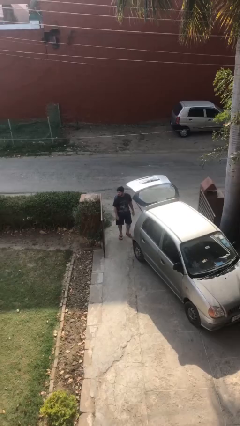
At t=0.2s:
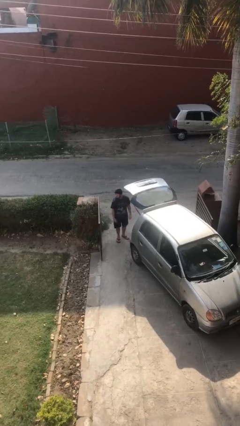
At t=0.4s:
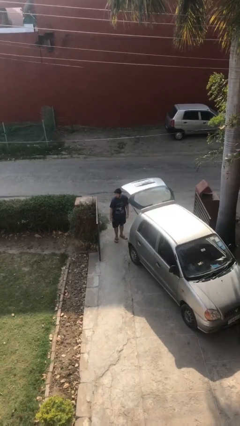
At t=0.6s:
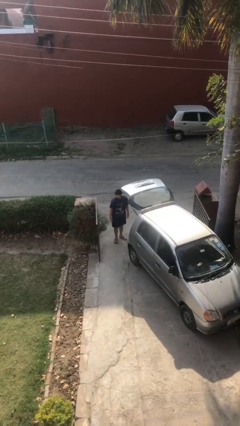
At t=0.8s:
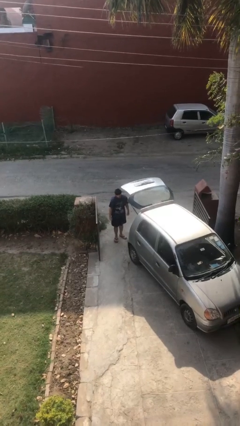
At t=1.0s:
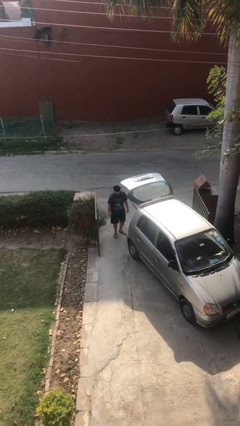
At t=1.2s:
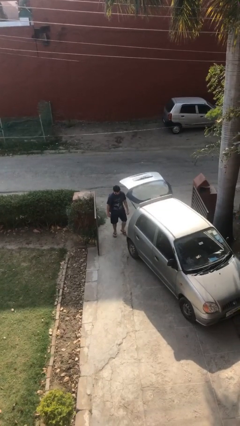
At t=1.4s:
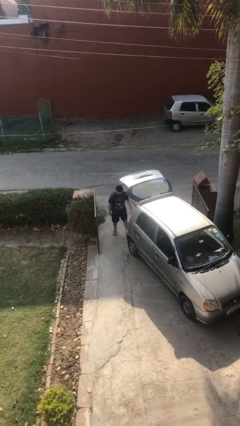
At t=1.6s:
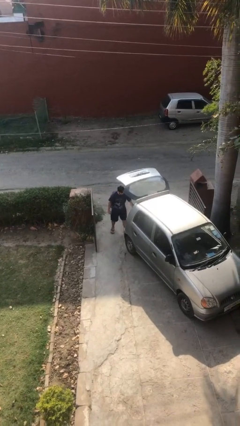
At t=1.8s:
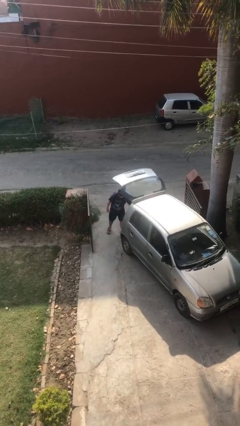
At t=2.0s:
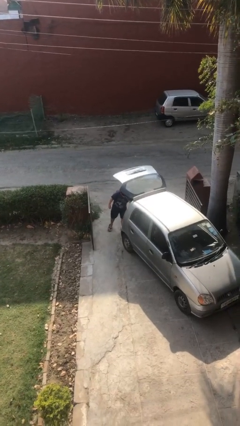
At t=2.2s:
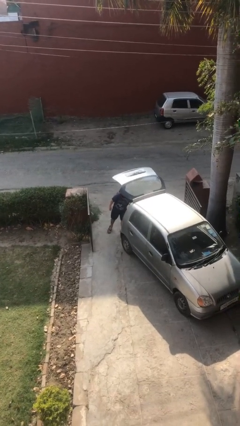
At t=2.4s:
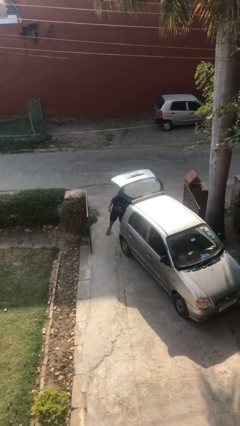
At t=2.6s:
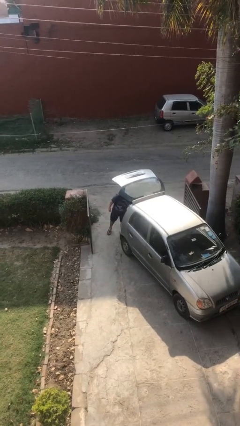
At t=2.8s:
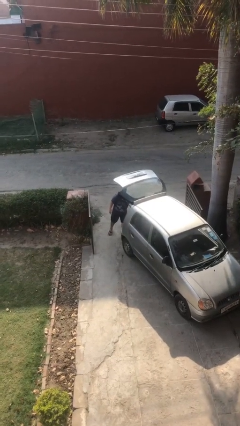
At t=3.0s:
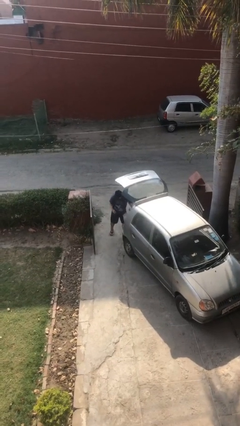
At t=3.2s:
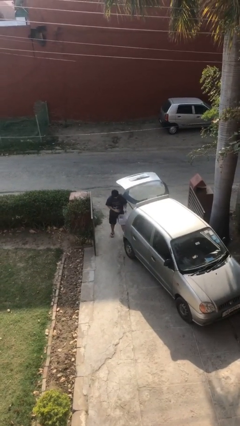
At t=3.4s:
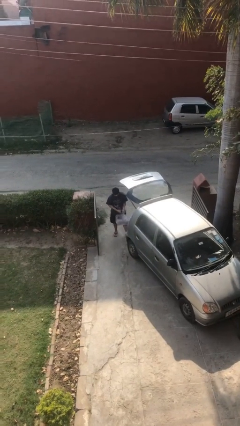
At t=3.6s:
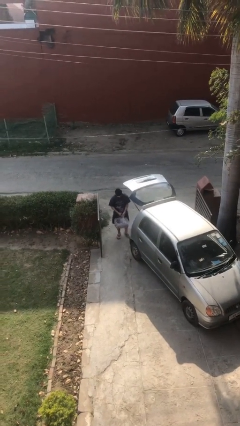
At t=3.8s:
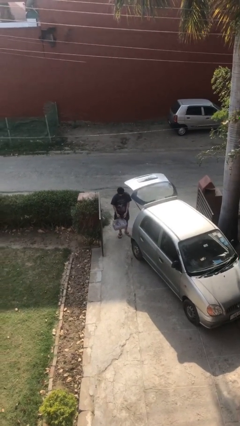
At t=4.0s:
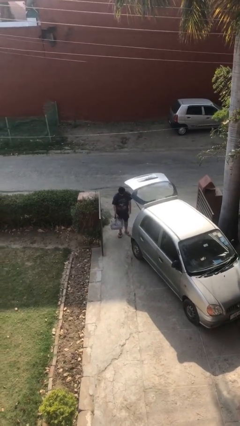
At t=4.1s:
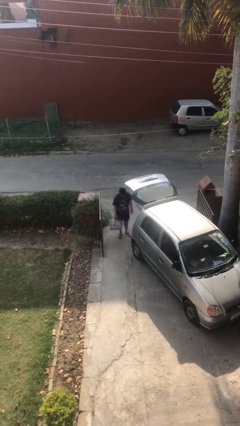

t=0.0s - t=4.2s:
person unloads car

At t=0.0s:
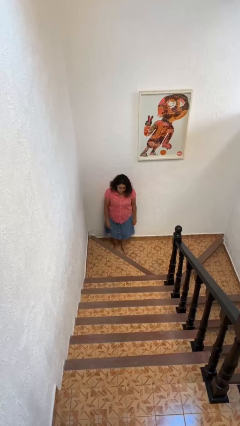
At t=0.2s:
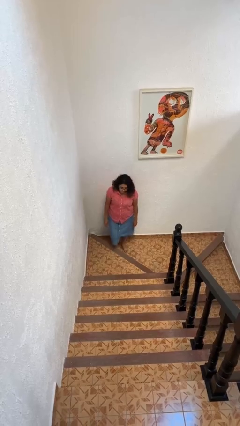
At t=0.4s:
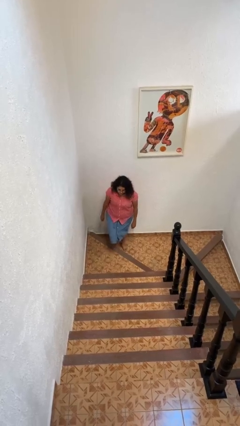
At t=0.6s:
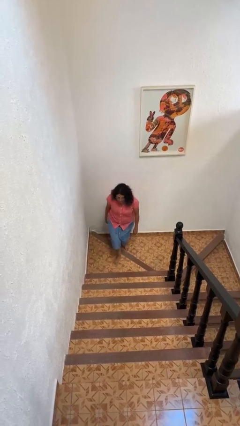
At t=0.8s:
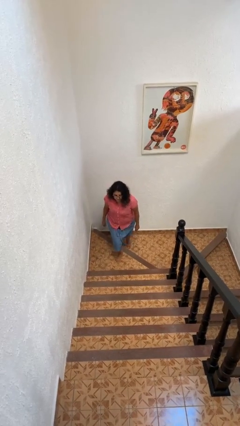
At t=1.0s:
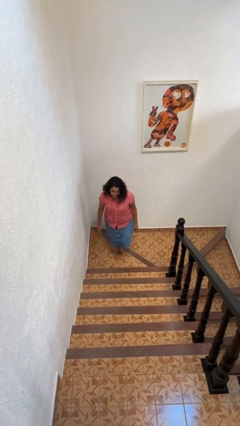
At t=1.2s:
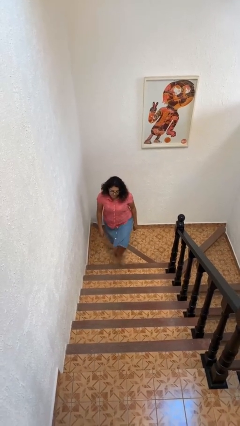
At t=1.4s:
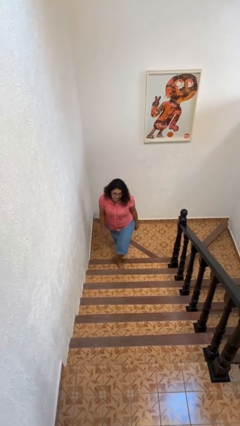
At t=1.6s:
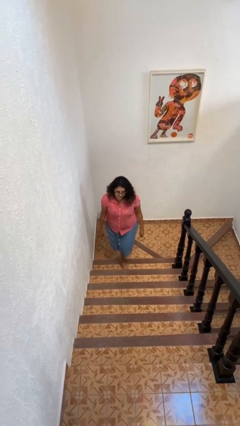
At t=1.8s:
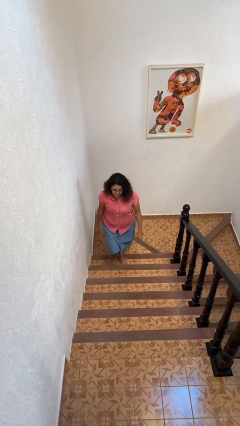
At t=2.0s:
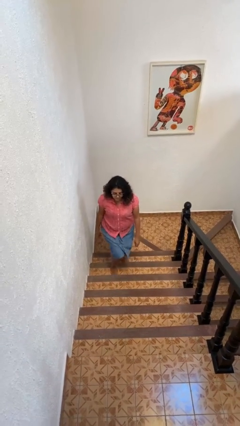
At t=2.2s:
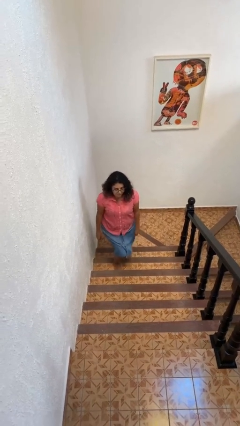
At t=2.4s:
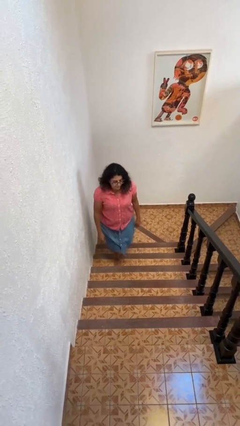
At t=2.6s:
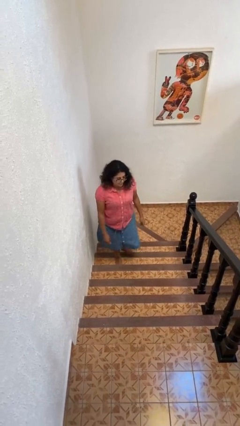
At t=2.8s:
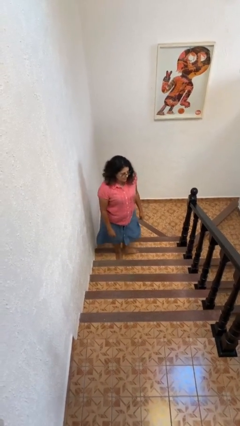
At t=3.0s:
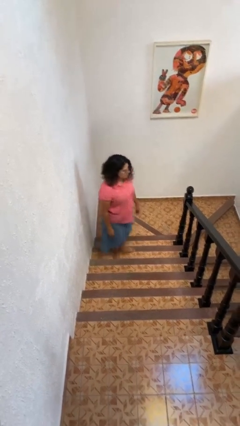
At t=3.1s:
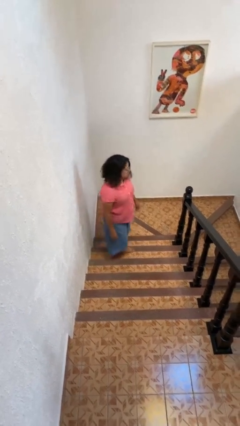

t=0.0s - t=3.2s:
person climbs up stairs

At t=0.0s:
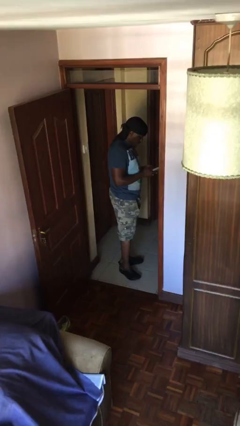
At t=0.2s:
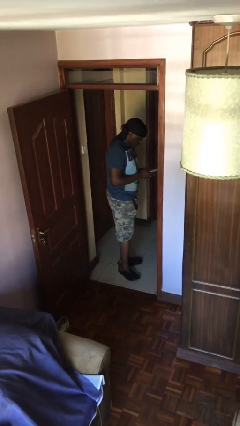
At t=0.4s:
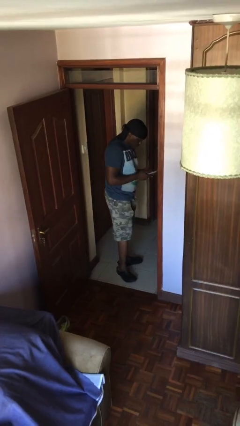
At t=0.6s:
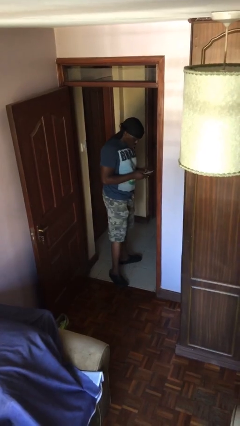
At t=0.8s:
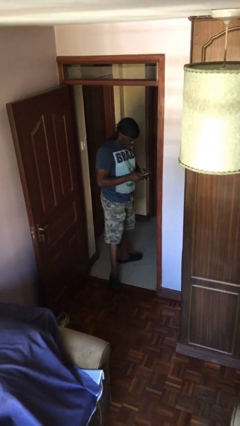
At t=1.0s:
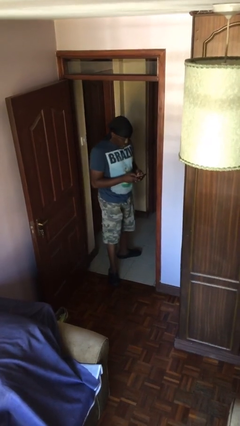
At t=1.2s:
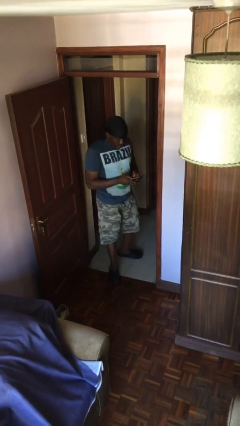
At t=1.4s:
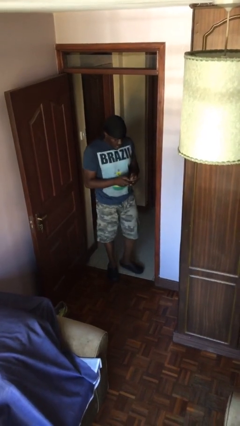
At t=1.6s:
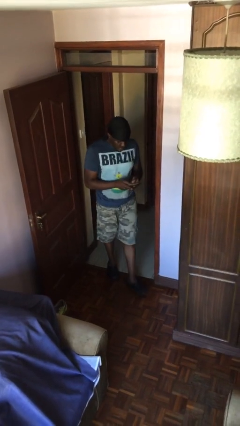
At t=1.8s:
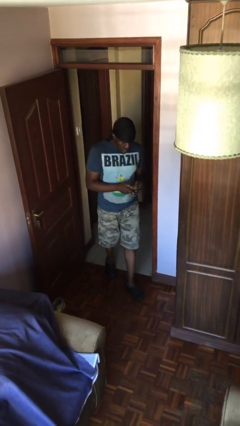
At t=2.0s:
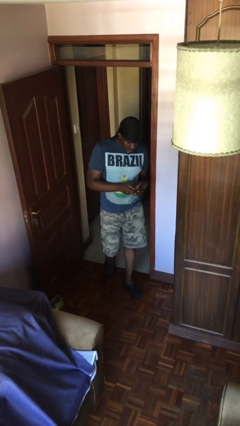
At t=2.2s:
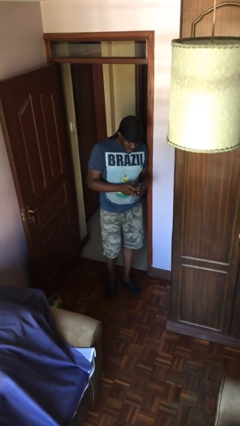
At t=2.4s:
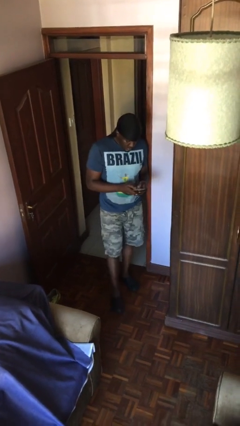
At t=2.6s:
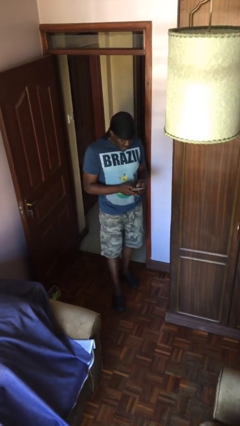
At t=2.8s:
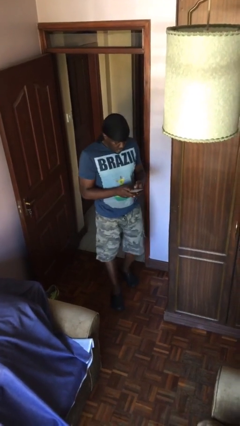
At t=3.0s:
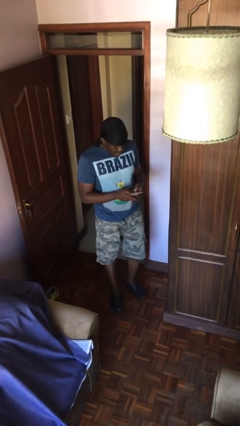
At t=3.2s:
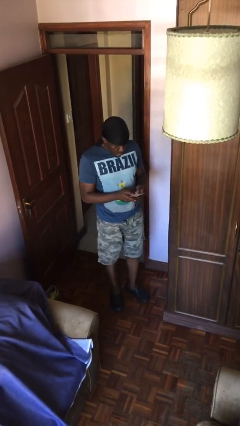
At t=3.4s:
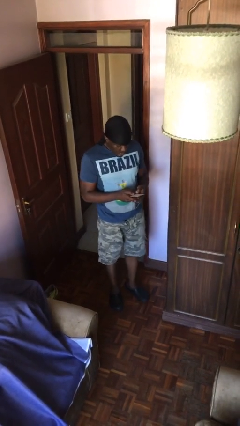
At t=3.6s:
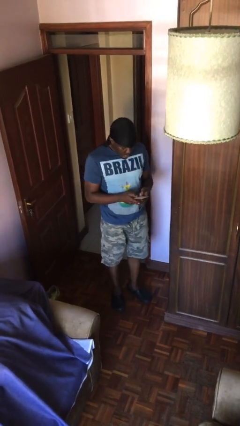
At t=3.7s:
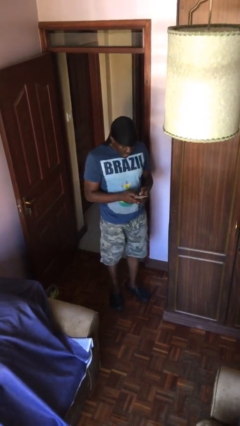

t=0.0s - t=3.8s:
person enters scene through structure

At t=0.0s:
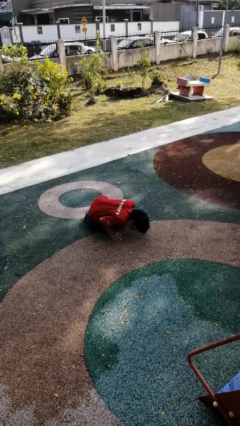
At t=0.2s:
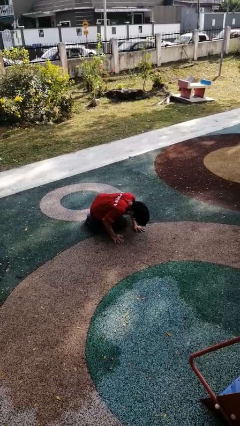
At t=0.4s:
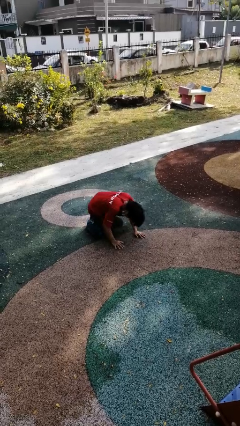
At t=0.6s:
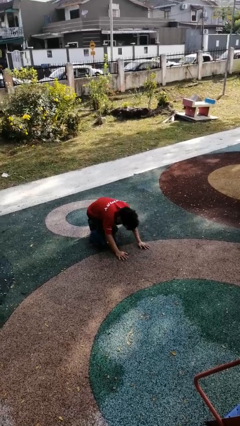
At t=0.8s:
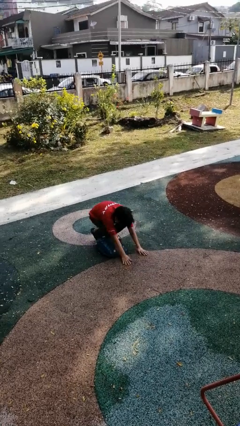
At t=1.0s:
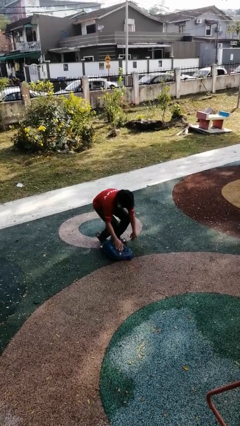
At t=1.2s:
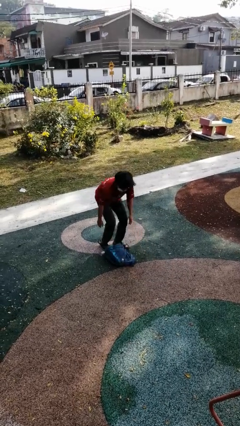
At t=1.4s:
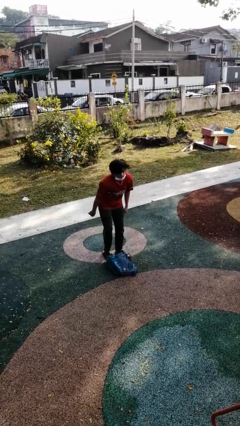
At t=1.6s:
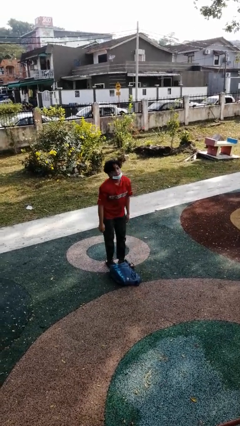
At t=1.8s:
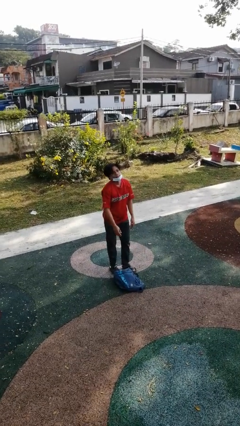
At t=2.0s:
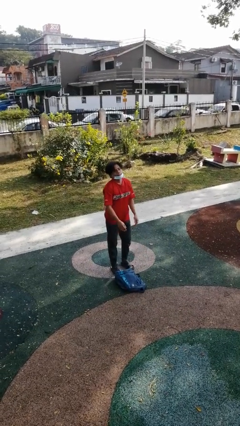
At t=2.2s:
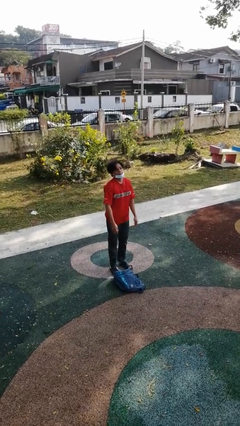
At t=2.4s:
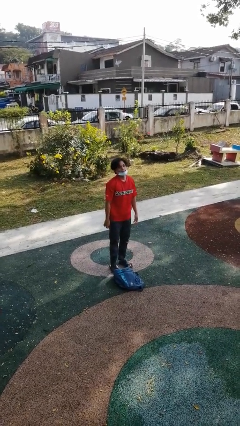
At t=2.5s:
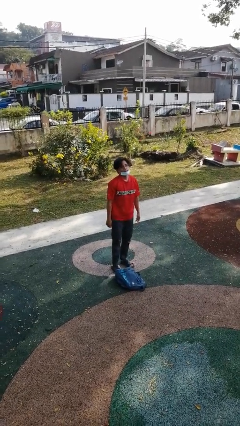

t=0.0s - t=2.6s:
person stands up from floor

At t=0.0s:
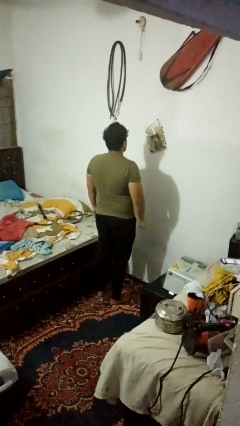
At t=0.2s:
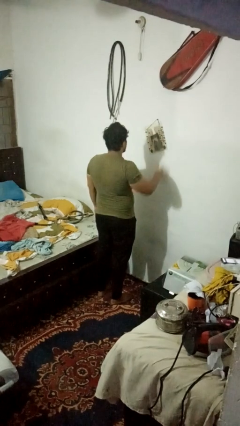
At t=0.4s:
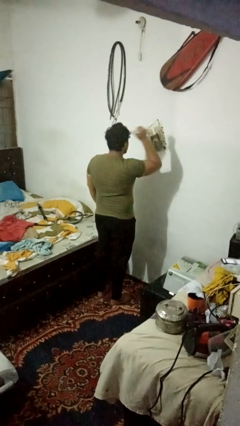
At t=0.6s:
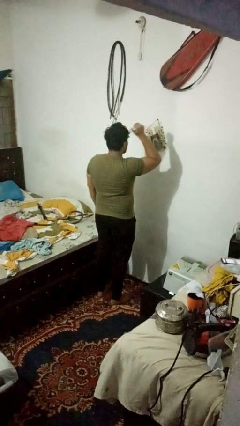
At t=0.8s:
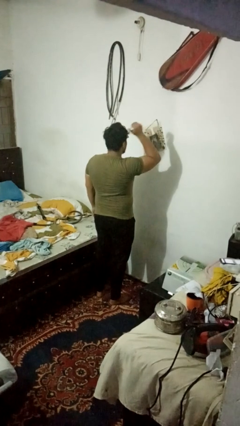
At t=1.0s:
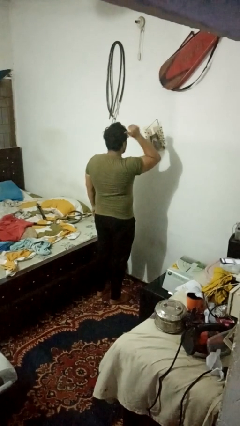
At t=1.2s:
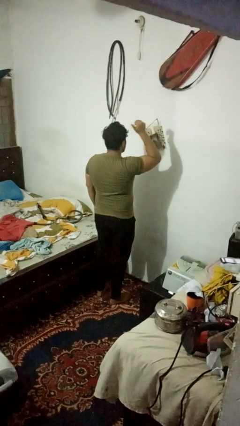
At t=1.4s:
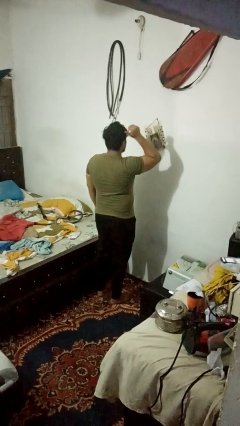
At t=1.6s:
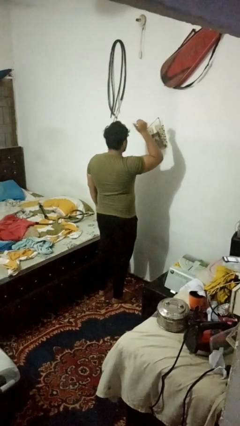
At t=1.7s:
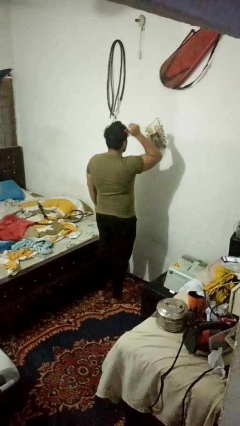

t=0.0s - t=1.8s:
person gestures behind me

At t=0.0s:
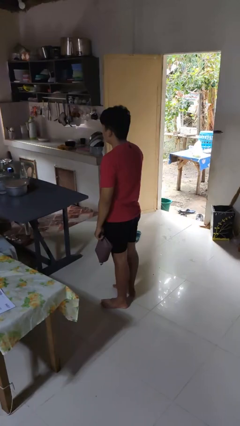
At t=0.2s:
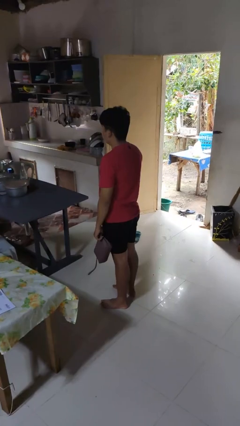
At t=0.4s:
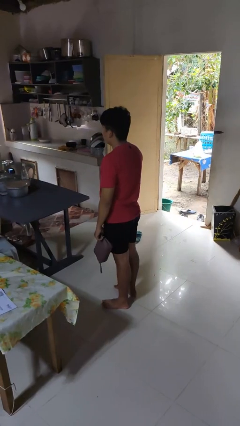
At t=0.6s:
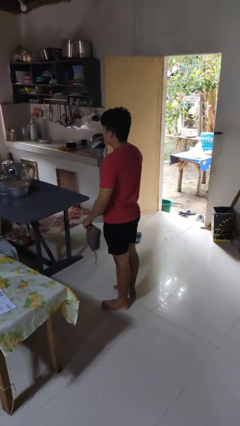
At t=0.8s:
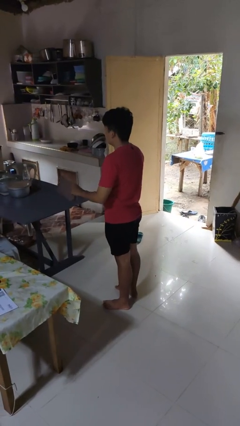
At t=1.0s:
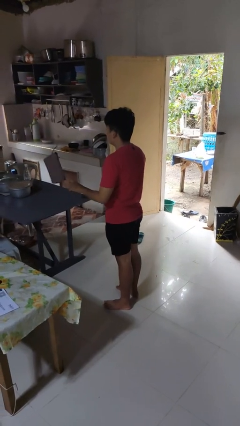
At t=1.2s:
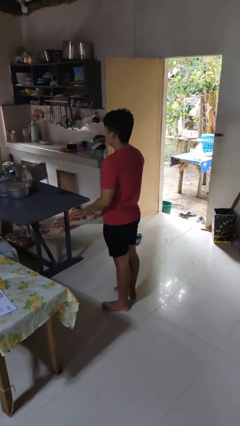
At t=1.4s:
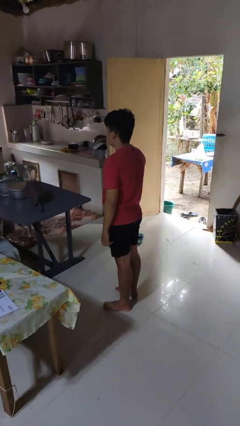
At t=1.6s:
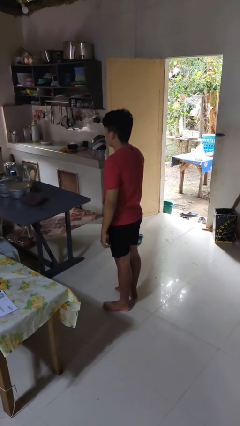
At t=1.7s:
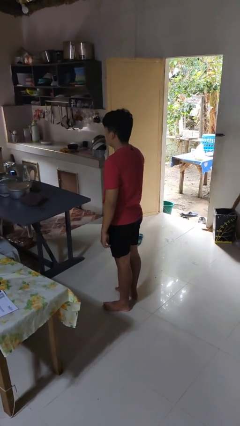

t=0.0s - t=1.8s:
person throws object on table

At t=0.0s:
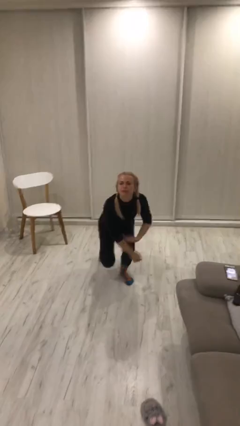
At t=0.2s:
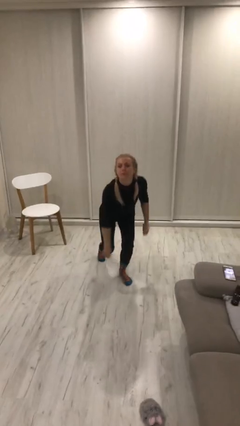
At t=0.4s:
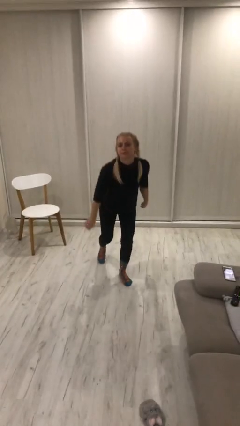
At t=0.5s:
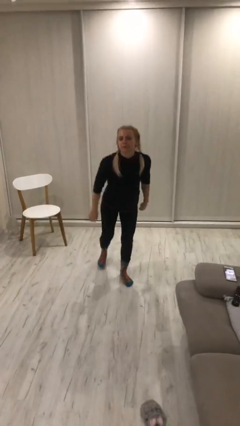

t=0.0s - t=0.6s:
person stands up
